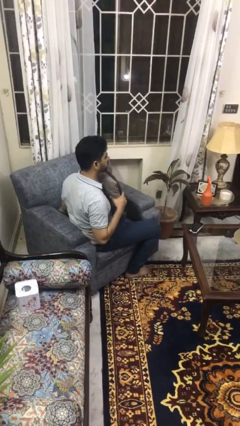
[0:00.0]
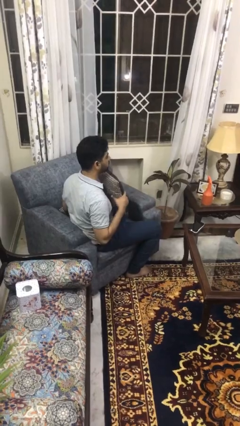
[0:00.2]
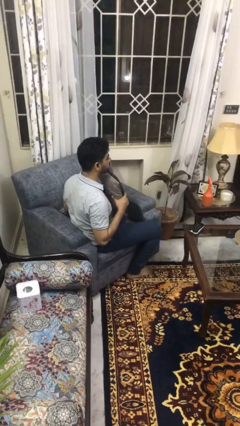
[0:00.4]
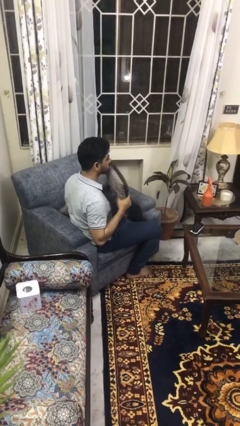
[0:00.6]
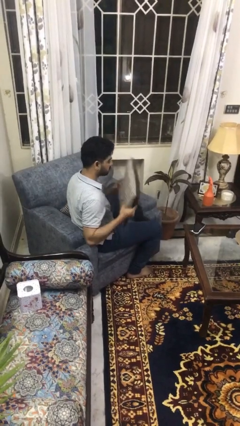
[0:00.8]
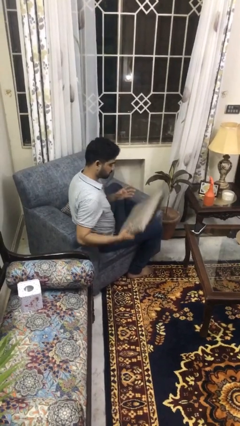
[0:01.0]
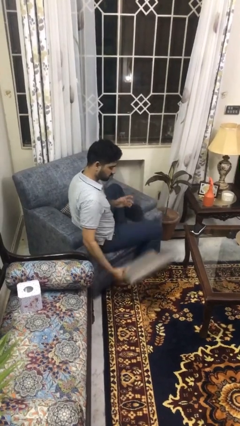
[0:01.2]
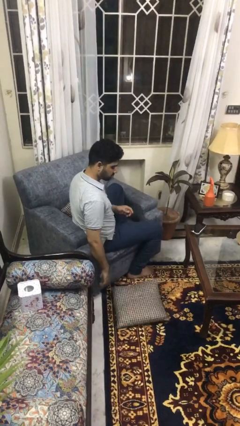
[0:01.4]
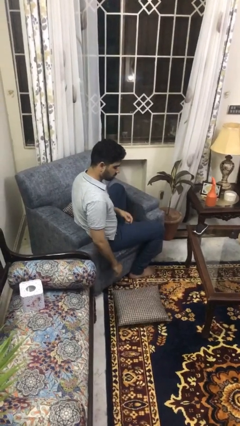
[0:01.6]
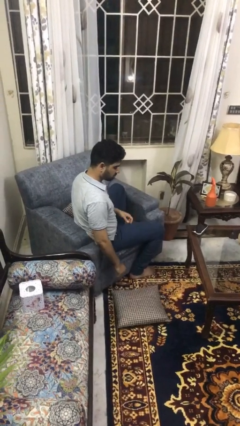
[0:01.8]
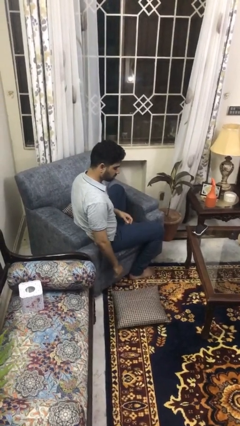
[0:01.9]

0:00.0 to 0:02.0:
person throws object to ground

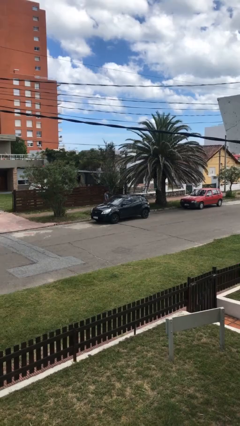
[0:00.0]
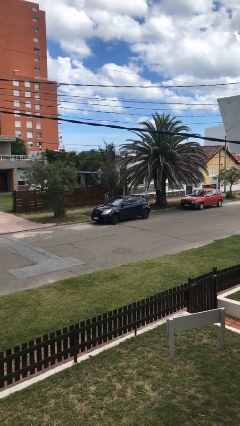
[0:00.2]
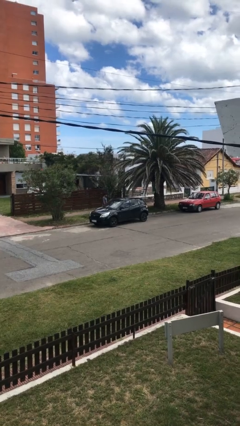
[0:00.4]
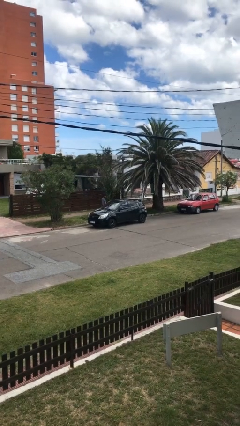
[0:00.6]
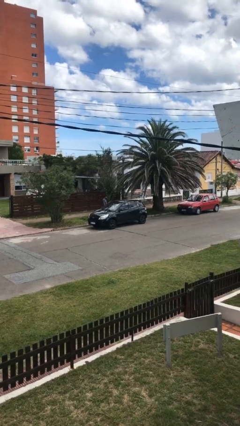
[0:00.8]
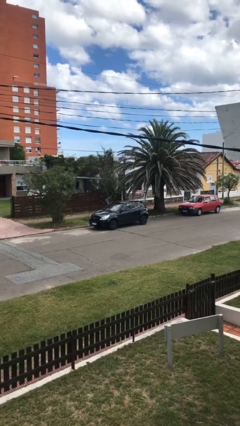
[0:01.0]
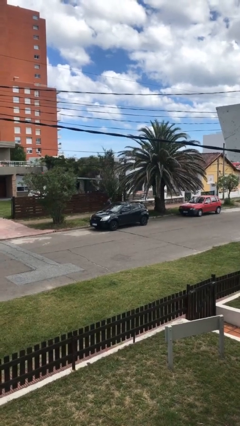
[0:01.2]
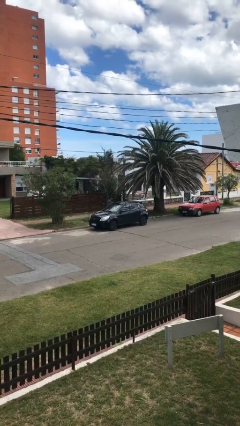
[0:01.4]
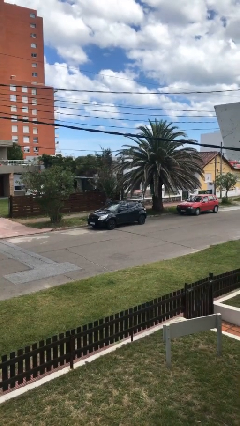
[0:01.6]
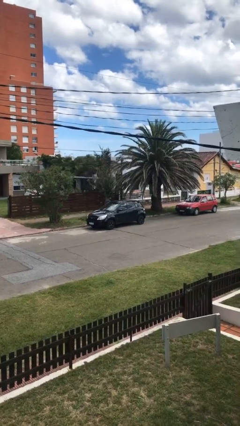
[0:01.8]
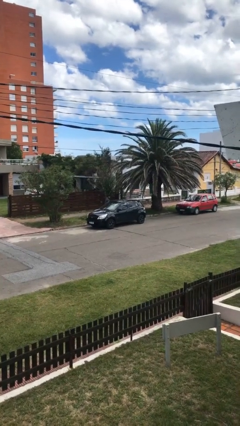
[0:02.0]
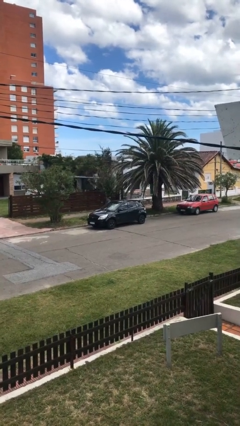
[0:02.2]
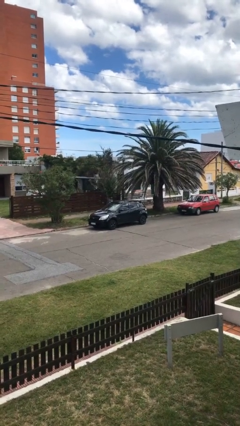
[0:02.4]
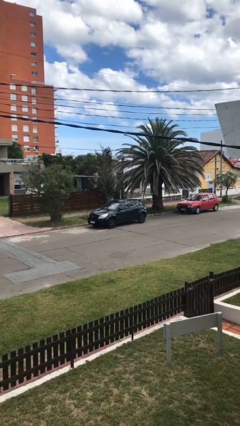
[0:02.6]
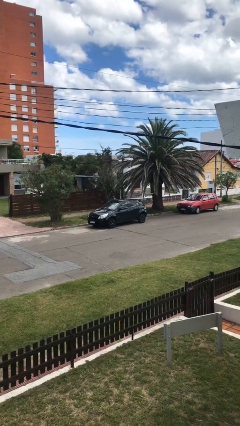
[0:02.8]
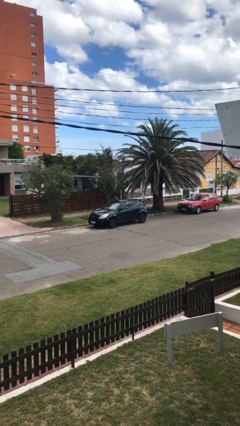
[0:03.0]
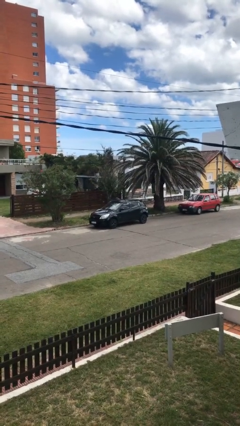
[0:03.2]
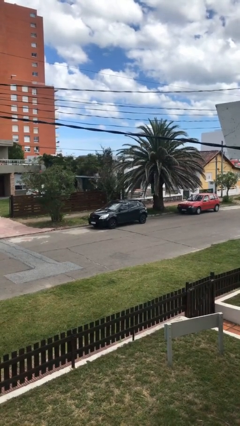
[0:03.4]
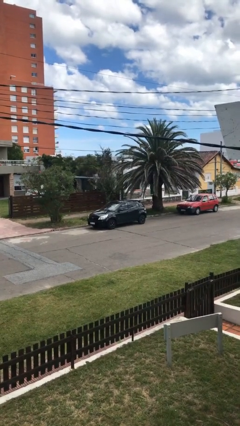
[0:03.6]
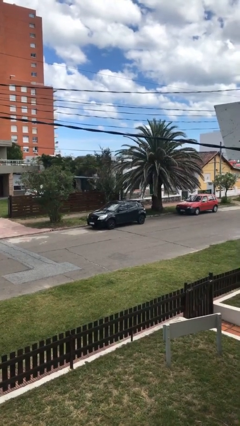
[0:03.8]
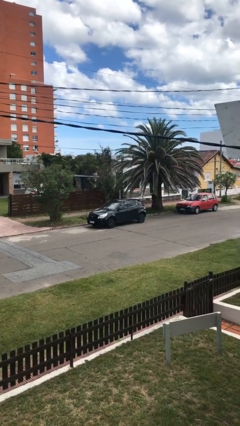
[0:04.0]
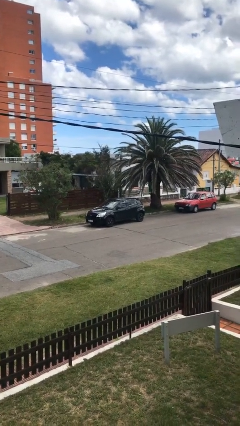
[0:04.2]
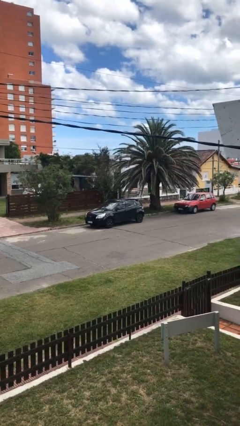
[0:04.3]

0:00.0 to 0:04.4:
car picks up person

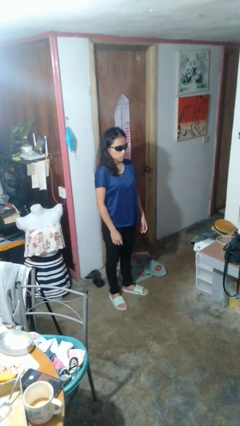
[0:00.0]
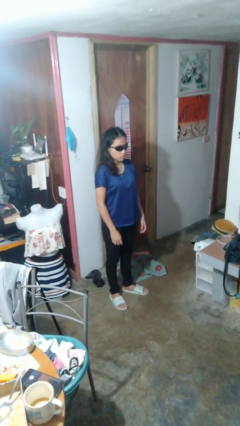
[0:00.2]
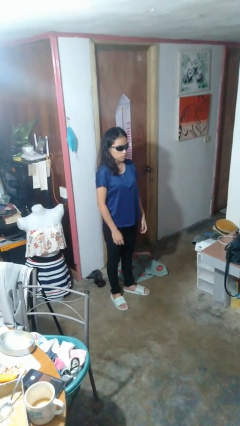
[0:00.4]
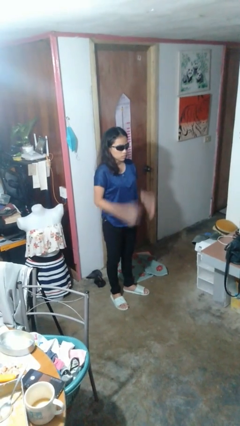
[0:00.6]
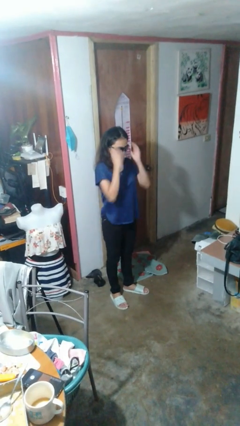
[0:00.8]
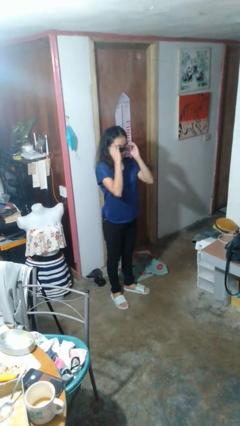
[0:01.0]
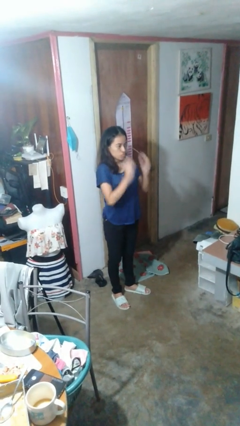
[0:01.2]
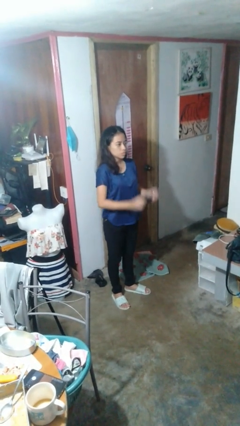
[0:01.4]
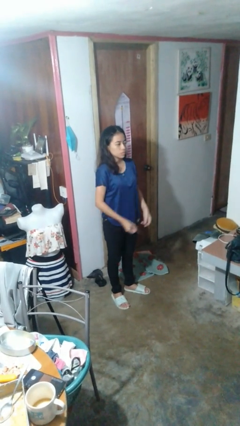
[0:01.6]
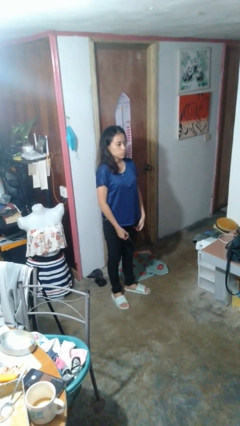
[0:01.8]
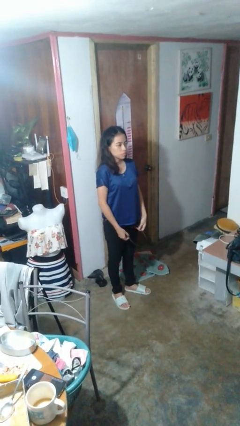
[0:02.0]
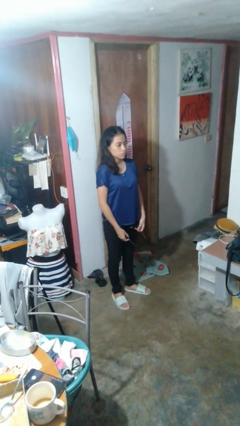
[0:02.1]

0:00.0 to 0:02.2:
person takes off sunglasses

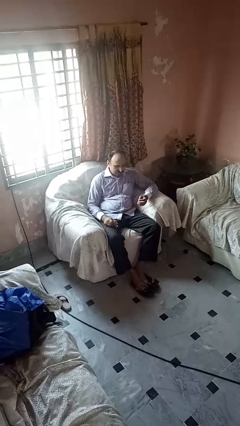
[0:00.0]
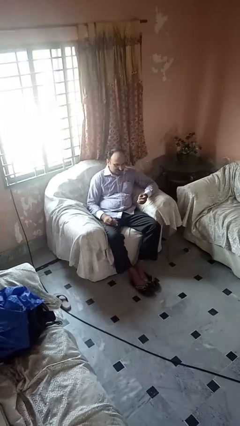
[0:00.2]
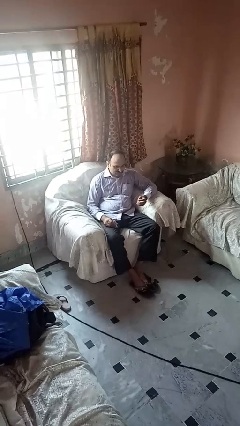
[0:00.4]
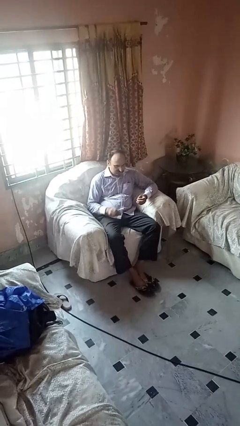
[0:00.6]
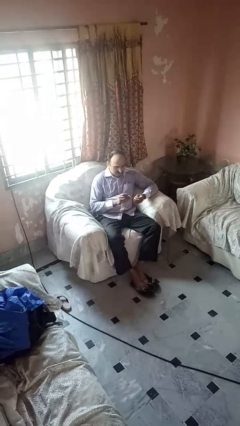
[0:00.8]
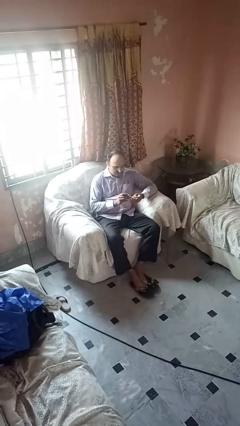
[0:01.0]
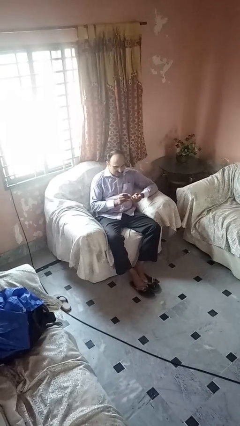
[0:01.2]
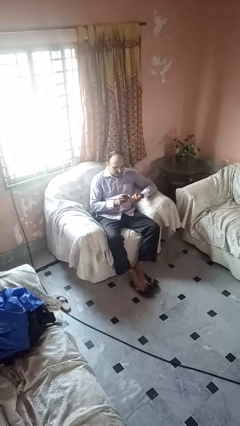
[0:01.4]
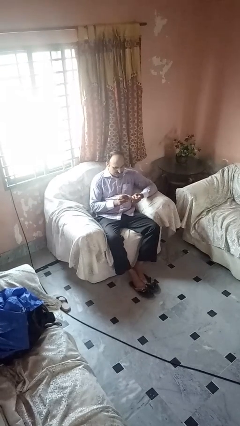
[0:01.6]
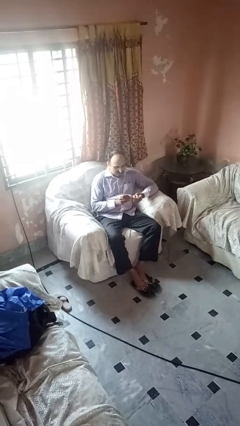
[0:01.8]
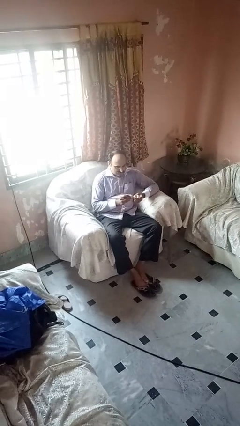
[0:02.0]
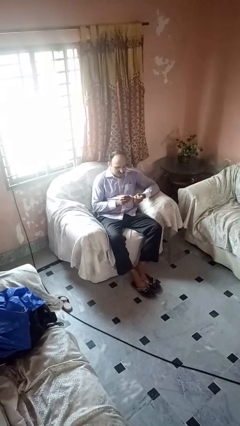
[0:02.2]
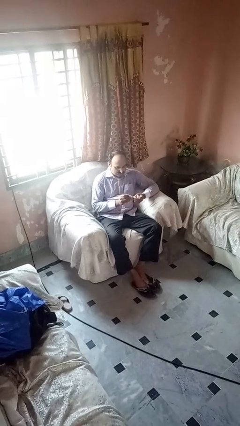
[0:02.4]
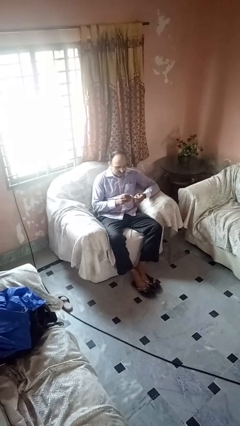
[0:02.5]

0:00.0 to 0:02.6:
person clips fingernails

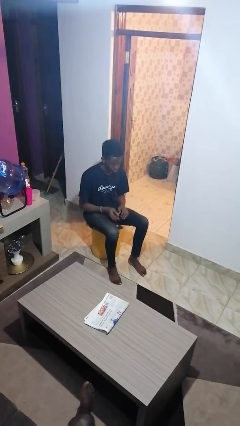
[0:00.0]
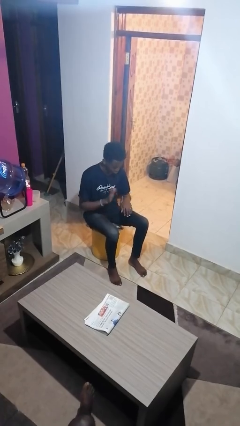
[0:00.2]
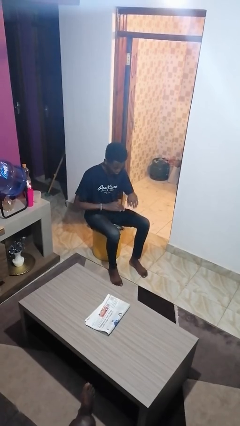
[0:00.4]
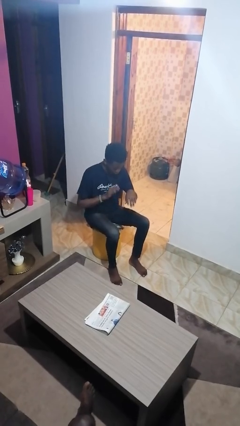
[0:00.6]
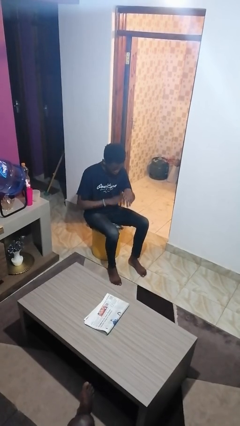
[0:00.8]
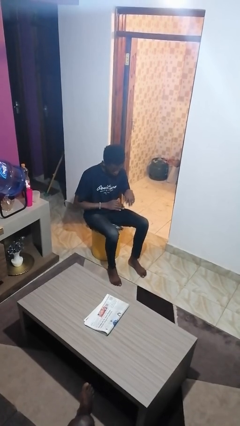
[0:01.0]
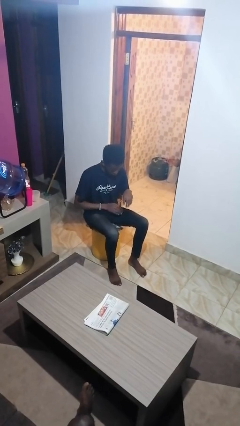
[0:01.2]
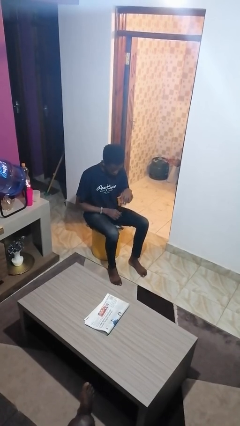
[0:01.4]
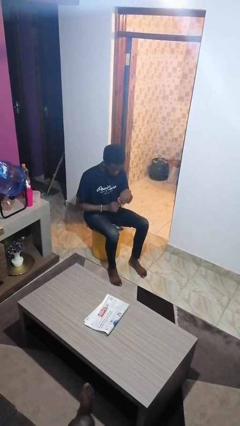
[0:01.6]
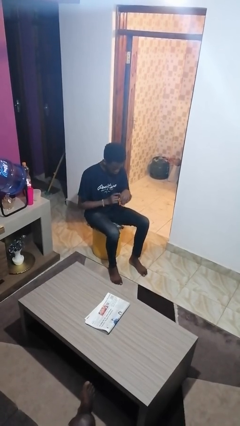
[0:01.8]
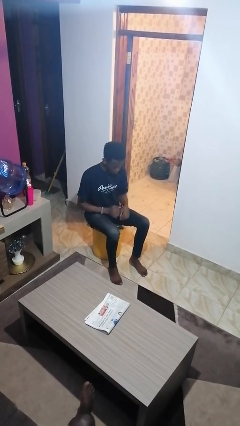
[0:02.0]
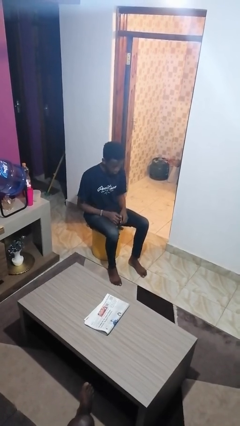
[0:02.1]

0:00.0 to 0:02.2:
person swats bug

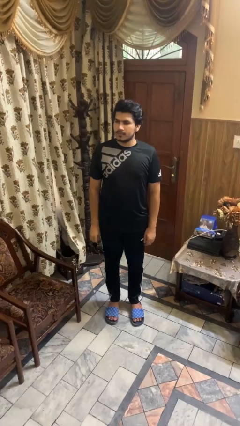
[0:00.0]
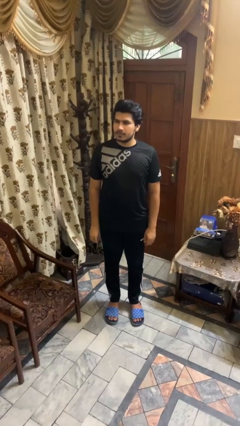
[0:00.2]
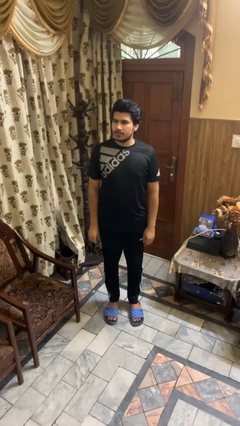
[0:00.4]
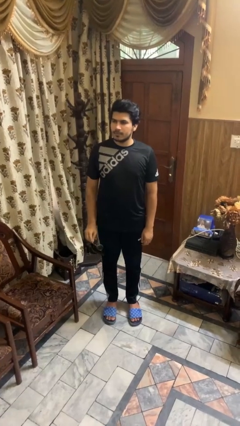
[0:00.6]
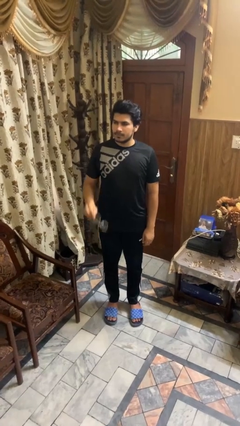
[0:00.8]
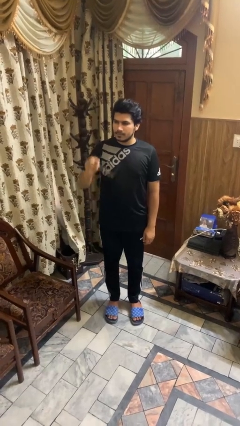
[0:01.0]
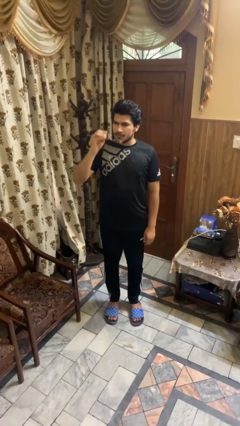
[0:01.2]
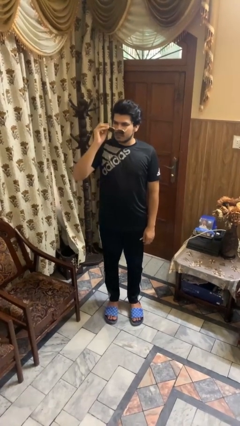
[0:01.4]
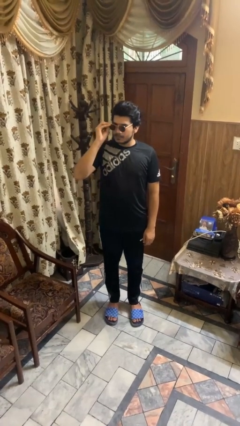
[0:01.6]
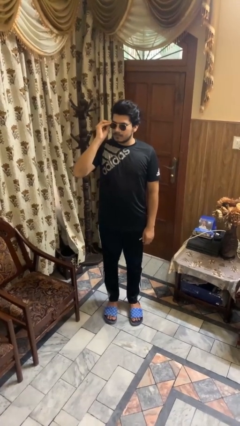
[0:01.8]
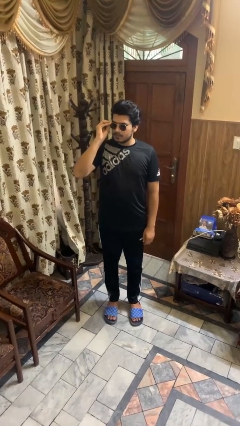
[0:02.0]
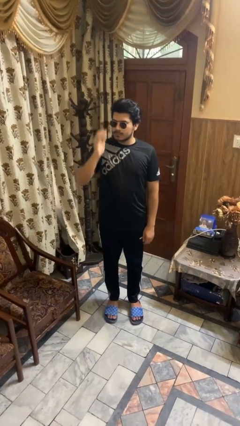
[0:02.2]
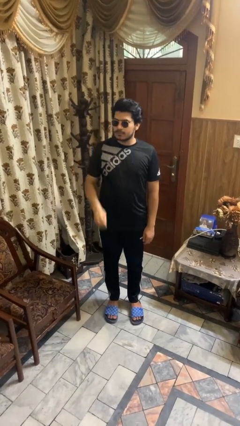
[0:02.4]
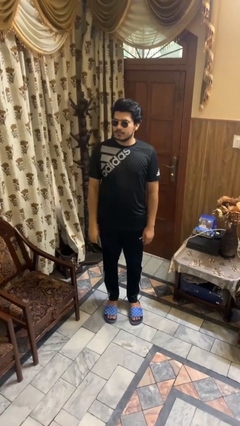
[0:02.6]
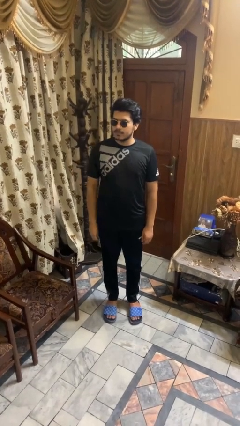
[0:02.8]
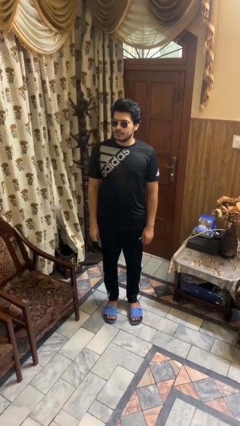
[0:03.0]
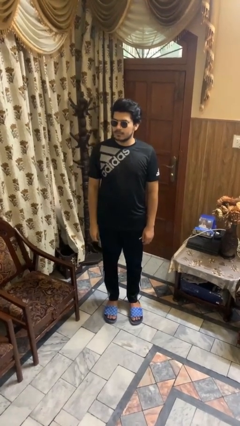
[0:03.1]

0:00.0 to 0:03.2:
person puts on sunglasses

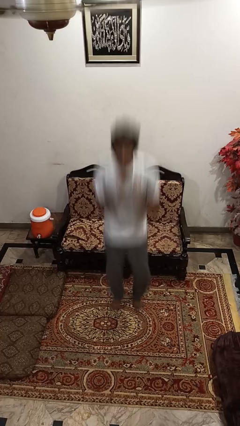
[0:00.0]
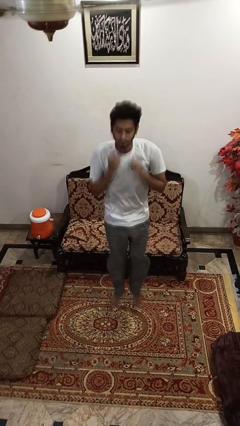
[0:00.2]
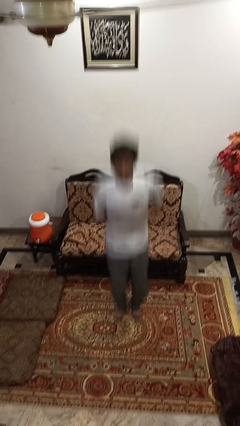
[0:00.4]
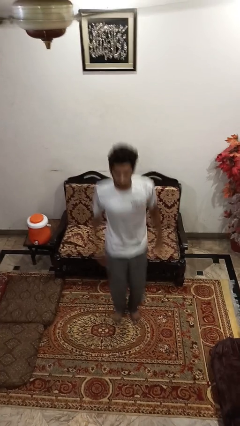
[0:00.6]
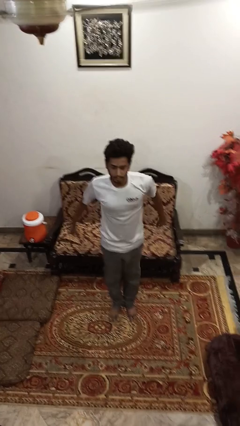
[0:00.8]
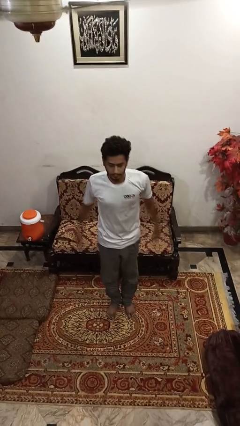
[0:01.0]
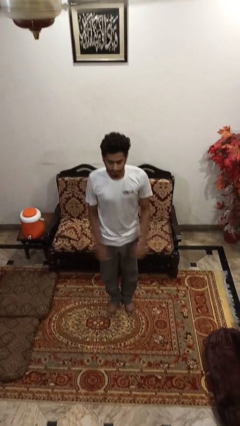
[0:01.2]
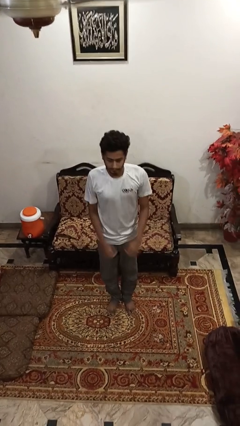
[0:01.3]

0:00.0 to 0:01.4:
person jumps
